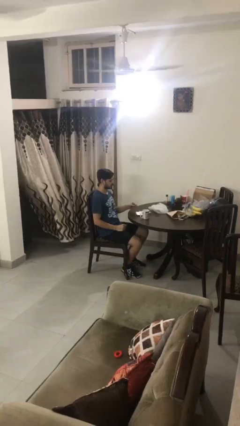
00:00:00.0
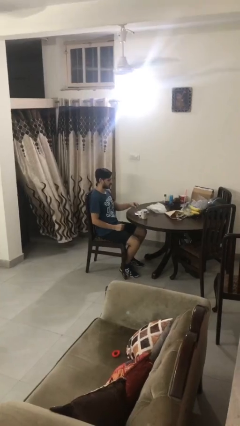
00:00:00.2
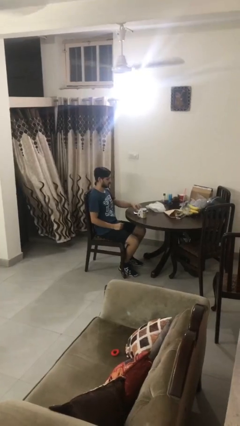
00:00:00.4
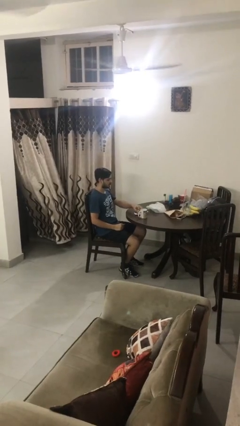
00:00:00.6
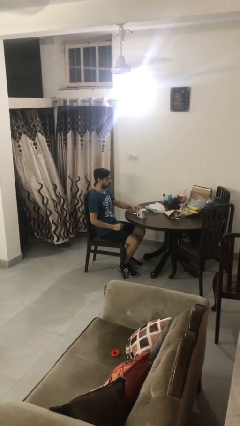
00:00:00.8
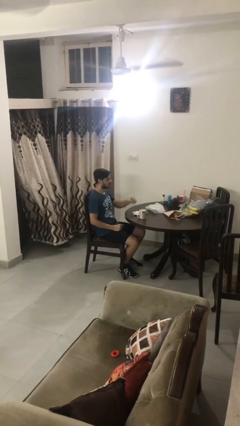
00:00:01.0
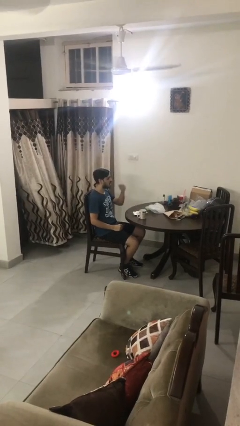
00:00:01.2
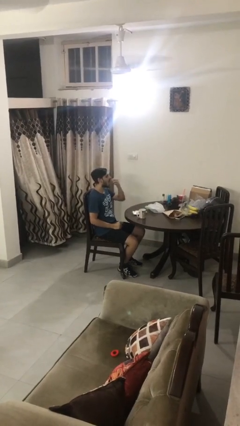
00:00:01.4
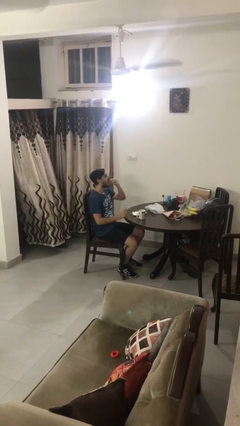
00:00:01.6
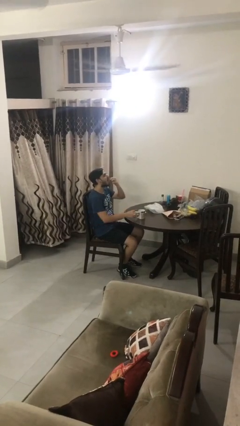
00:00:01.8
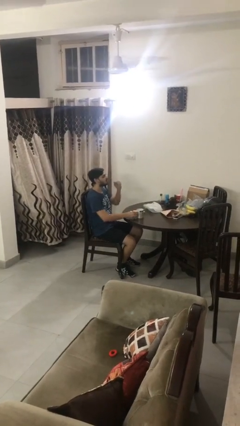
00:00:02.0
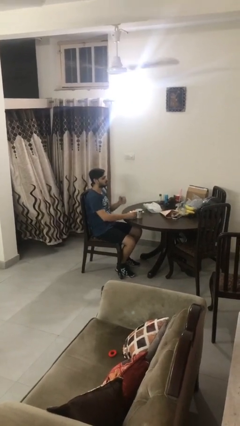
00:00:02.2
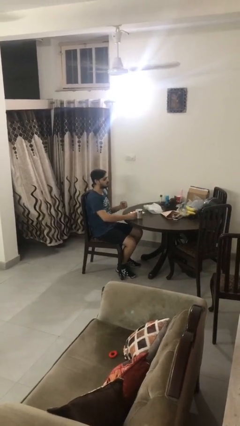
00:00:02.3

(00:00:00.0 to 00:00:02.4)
person takes medicine pills

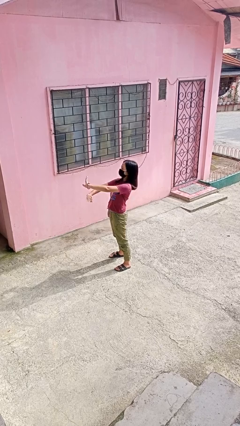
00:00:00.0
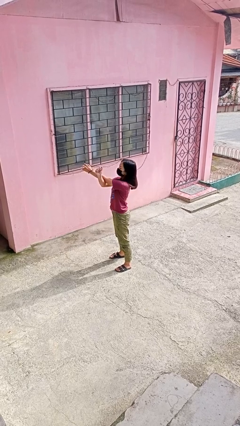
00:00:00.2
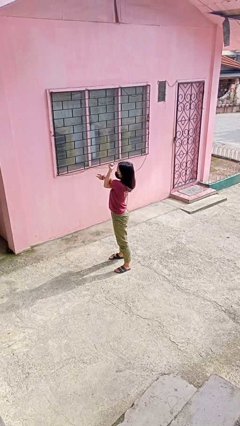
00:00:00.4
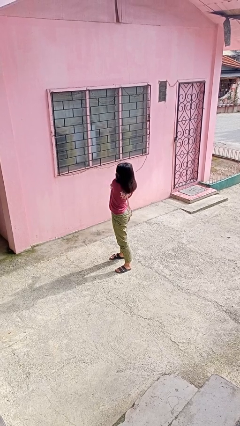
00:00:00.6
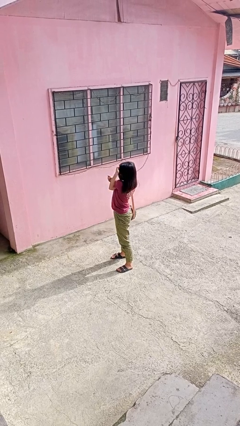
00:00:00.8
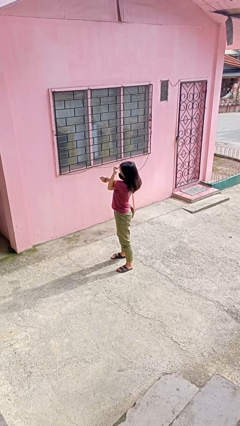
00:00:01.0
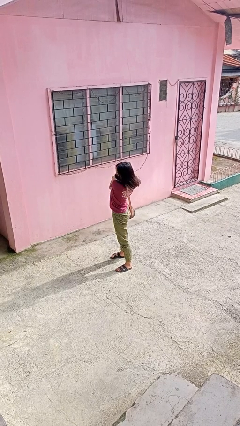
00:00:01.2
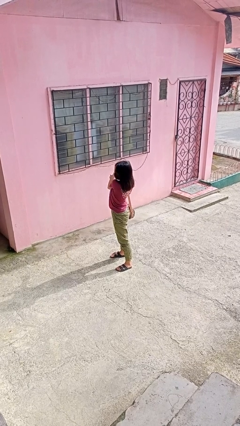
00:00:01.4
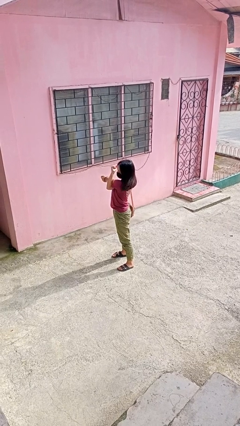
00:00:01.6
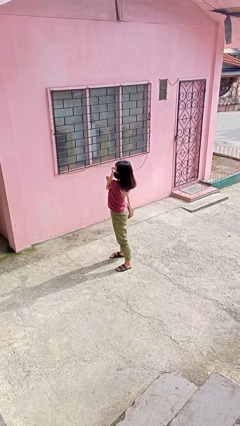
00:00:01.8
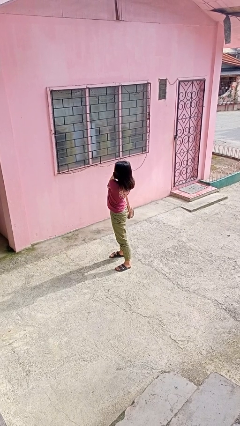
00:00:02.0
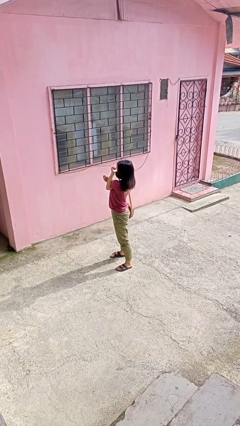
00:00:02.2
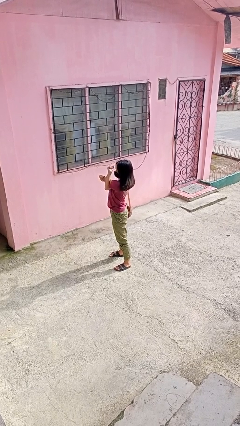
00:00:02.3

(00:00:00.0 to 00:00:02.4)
person stretches arms to side

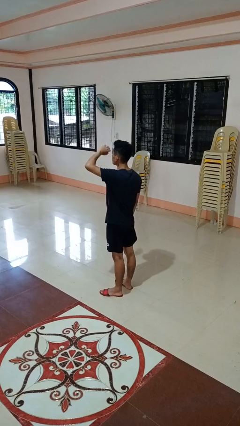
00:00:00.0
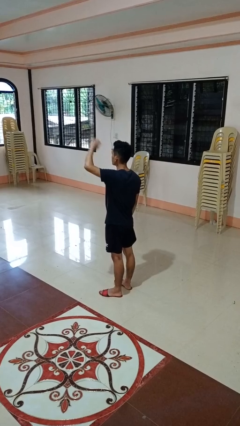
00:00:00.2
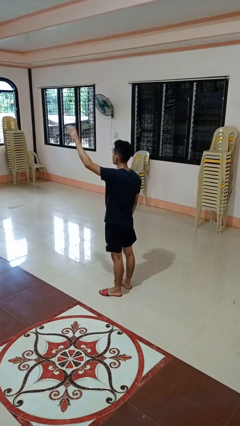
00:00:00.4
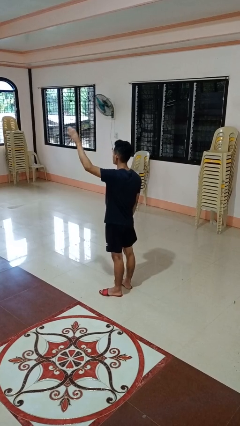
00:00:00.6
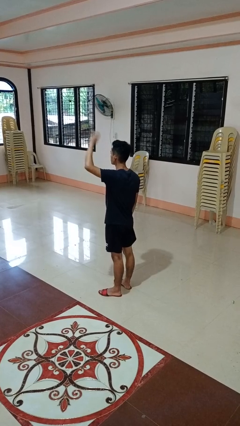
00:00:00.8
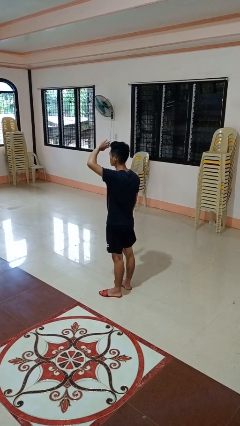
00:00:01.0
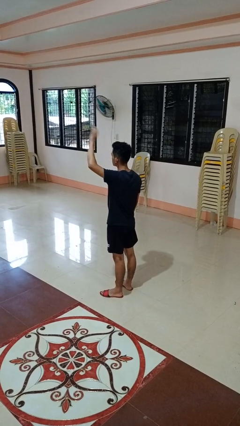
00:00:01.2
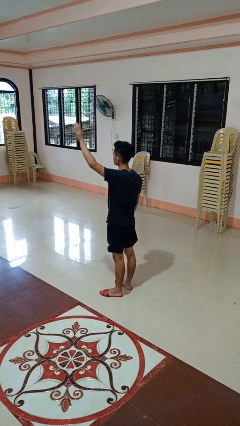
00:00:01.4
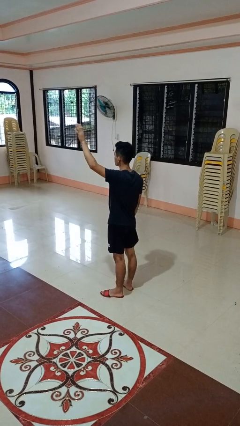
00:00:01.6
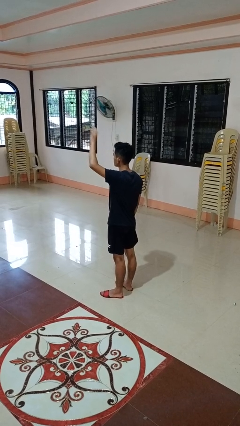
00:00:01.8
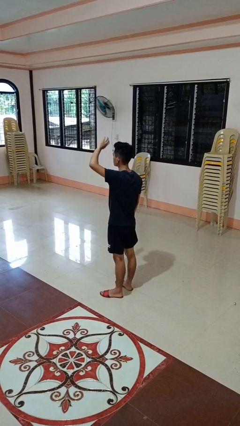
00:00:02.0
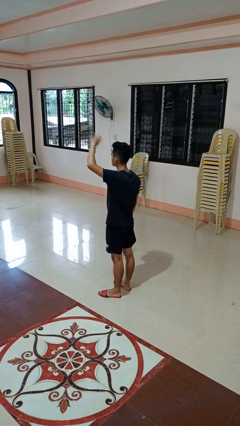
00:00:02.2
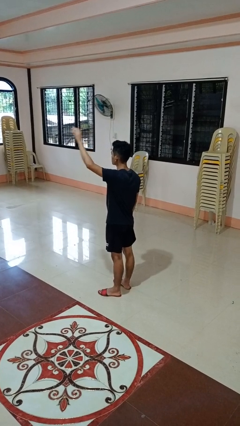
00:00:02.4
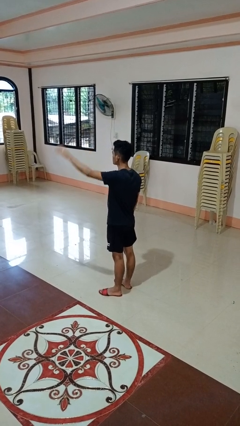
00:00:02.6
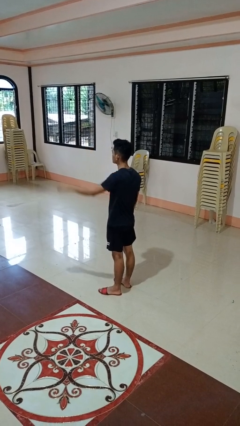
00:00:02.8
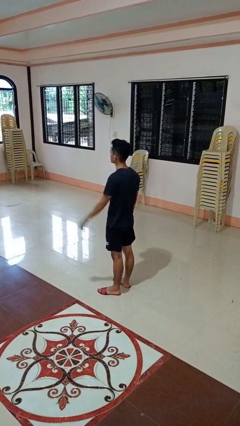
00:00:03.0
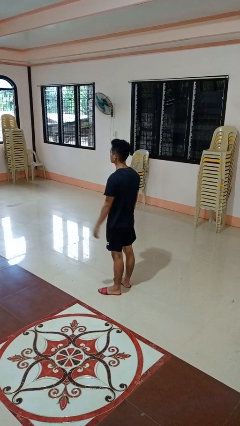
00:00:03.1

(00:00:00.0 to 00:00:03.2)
person waves at person

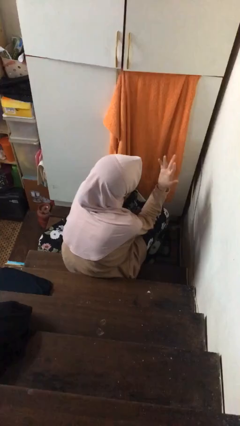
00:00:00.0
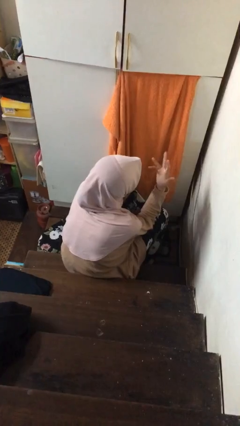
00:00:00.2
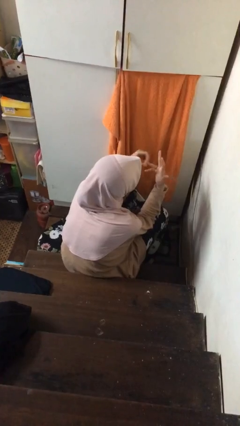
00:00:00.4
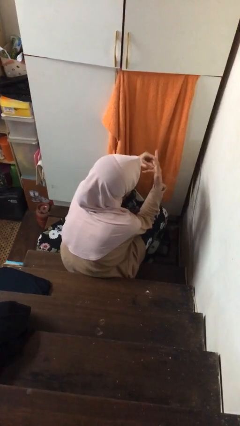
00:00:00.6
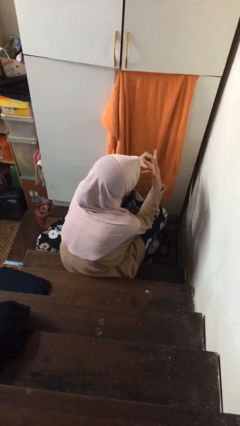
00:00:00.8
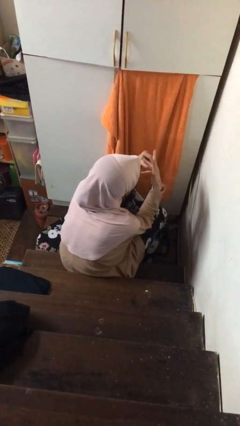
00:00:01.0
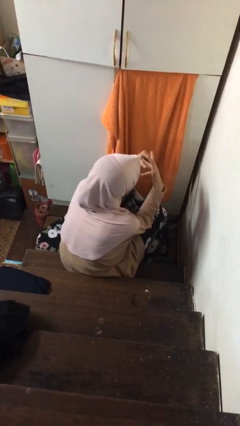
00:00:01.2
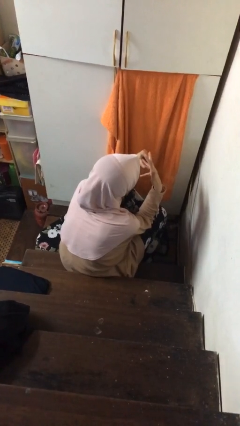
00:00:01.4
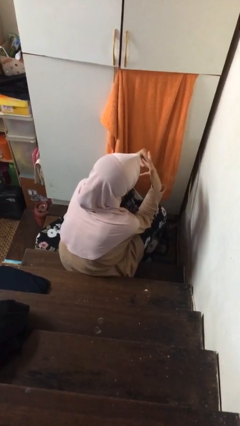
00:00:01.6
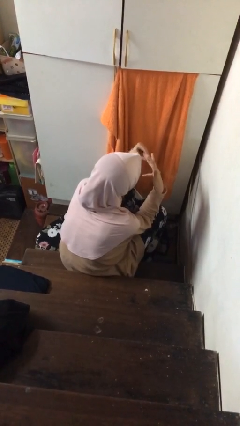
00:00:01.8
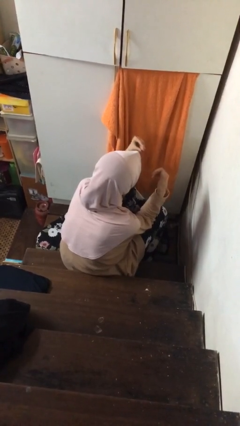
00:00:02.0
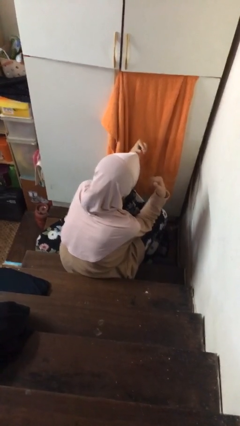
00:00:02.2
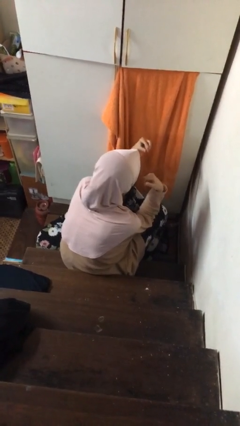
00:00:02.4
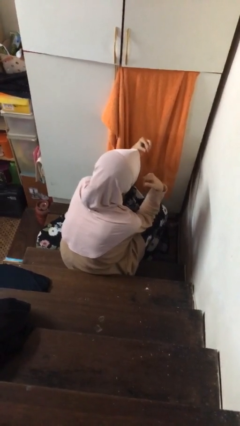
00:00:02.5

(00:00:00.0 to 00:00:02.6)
person takes off ring

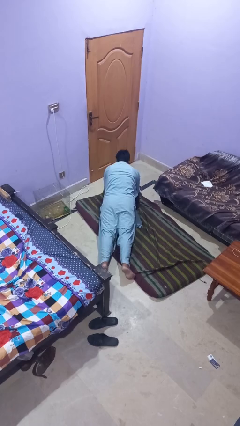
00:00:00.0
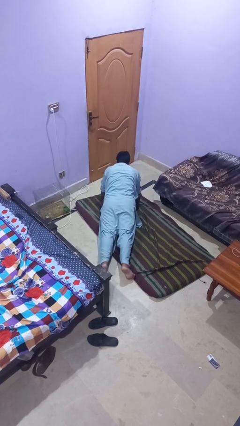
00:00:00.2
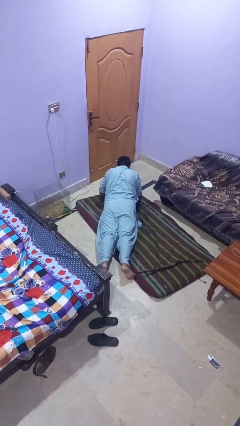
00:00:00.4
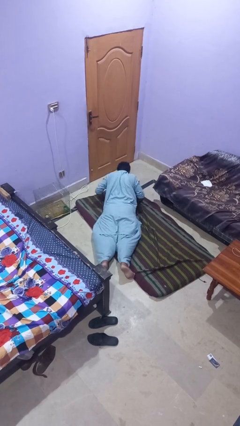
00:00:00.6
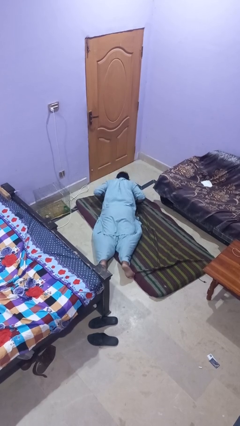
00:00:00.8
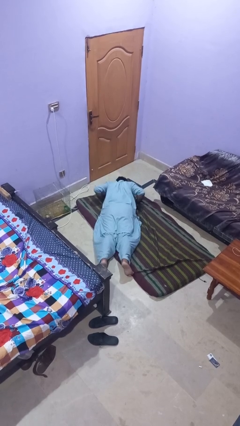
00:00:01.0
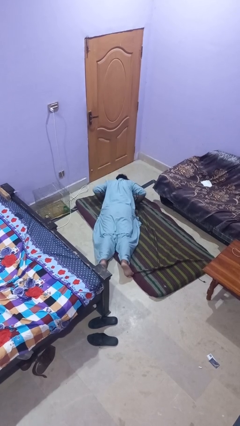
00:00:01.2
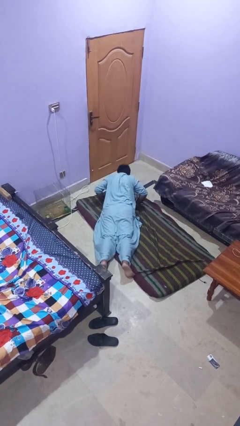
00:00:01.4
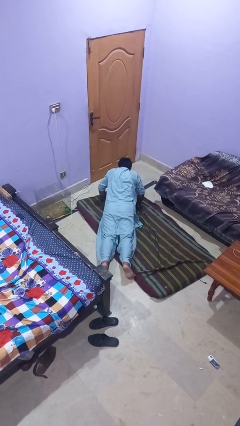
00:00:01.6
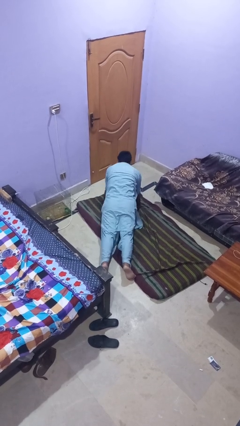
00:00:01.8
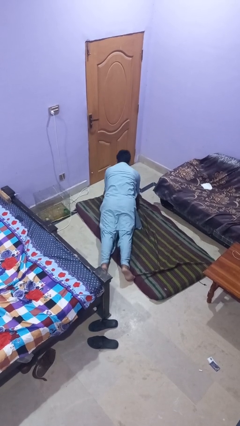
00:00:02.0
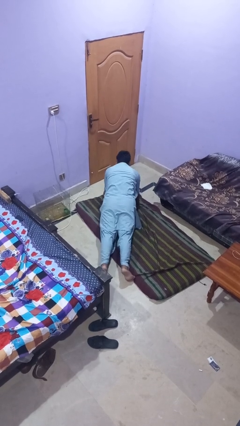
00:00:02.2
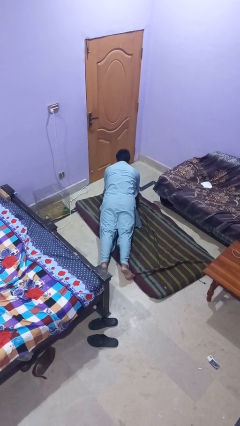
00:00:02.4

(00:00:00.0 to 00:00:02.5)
person exercises with pushup

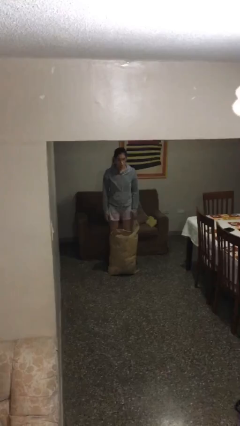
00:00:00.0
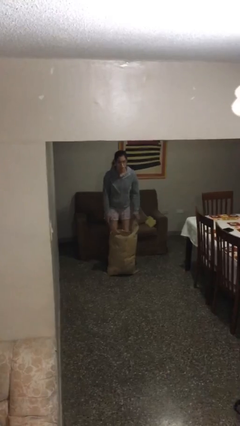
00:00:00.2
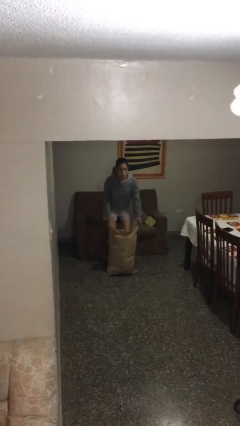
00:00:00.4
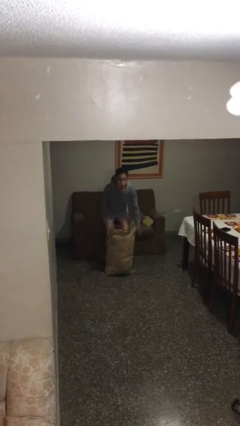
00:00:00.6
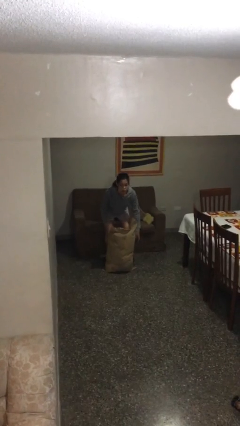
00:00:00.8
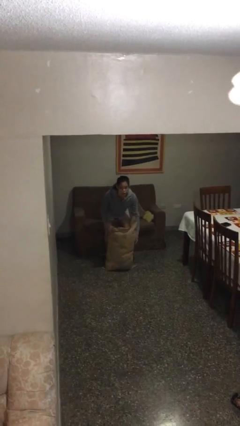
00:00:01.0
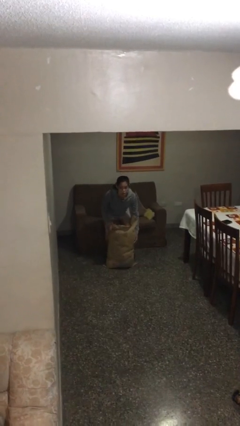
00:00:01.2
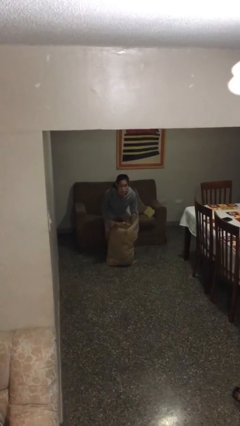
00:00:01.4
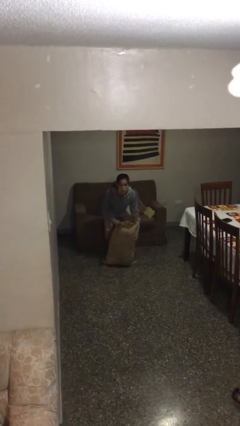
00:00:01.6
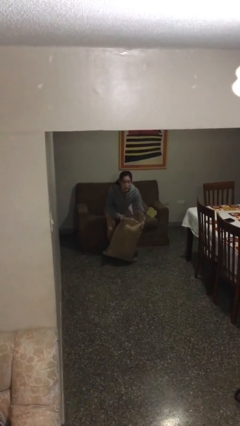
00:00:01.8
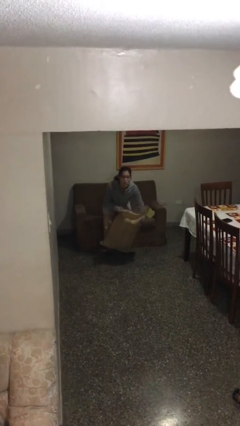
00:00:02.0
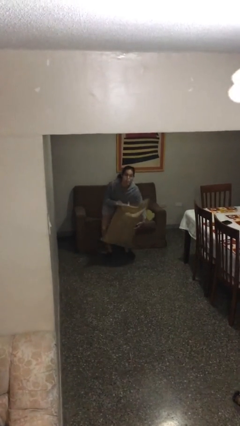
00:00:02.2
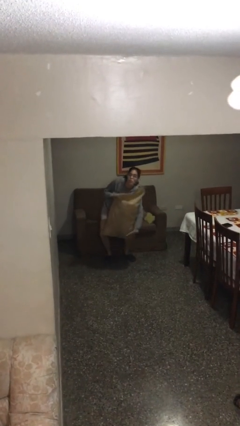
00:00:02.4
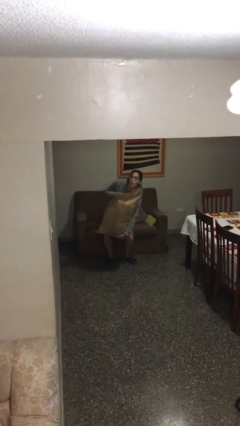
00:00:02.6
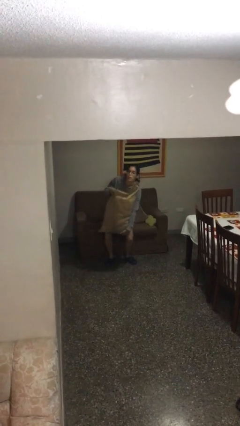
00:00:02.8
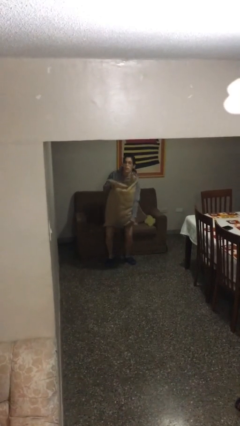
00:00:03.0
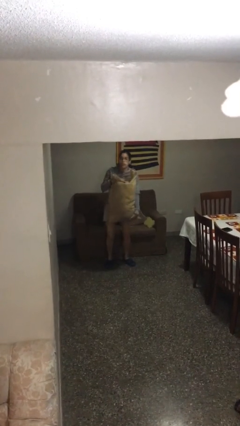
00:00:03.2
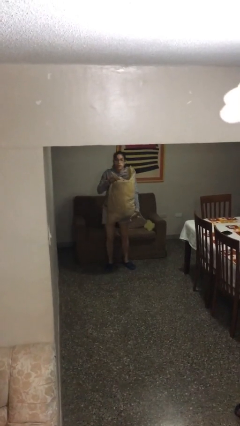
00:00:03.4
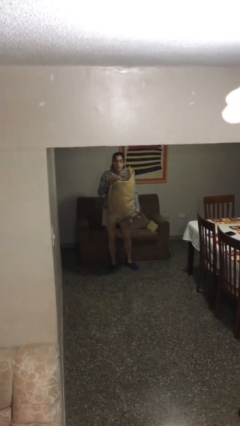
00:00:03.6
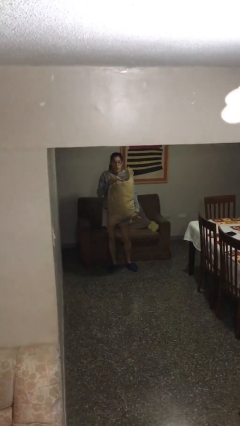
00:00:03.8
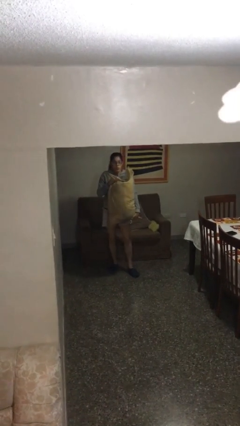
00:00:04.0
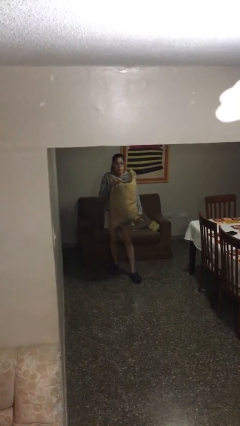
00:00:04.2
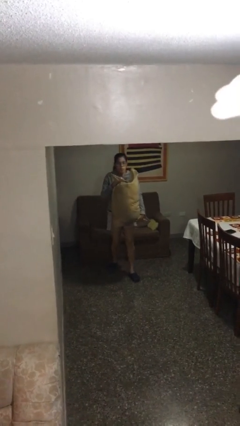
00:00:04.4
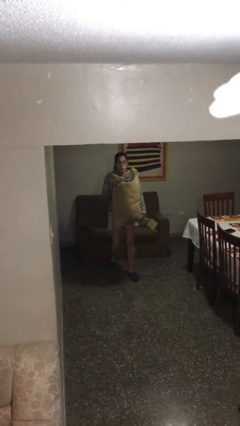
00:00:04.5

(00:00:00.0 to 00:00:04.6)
person picks up object from floor
